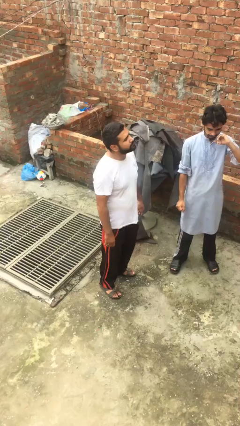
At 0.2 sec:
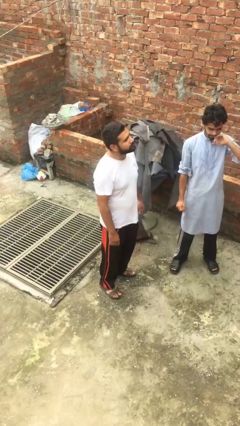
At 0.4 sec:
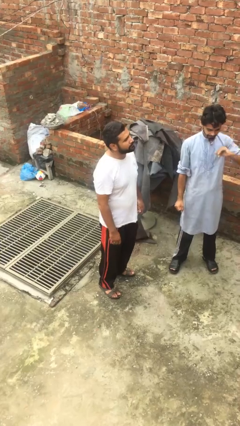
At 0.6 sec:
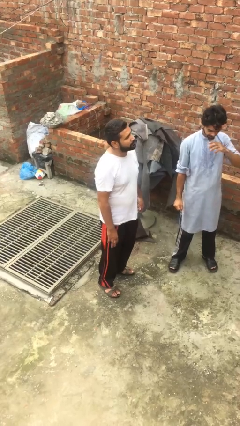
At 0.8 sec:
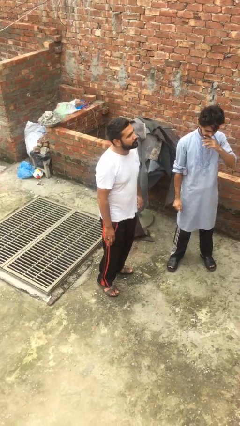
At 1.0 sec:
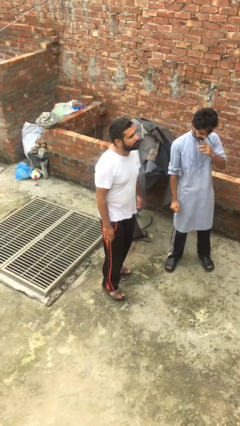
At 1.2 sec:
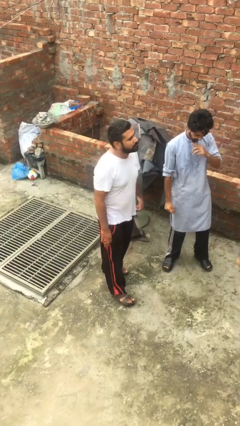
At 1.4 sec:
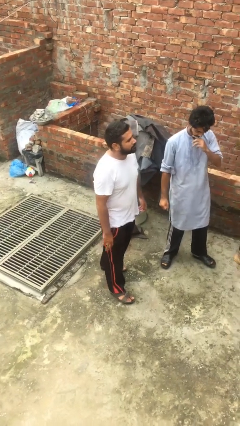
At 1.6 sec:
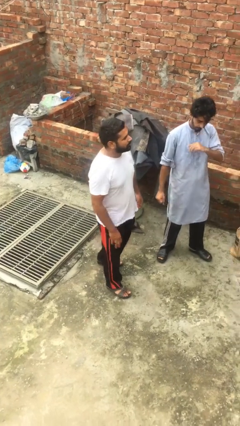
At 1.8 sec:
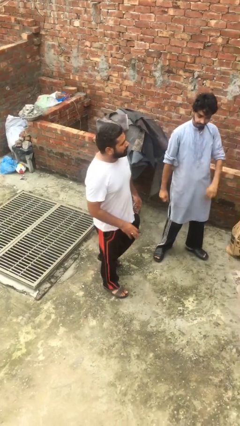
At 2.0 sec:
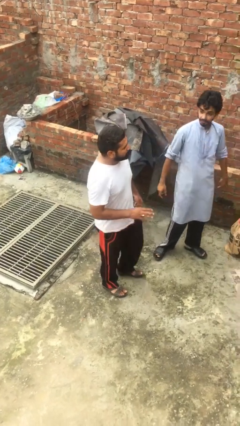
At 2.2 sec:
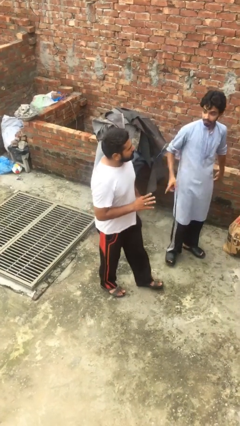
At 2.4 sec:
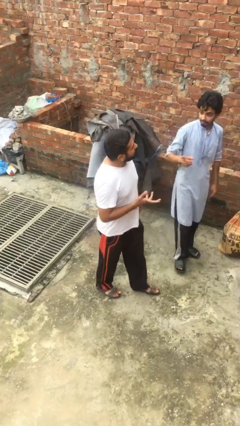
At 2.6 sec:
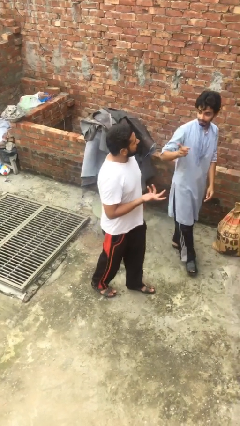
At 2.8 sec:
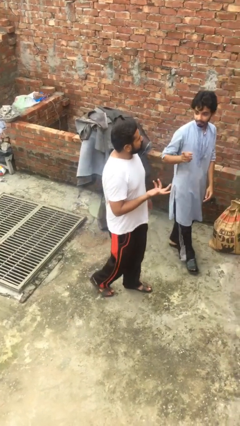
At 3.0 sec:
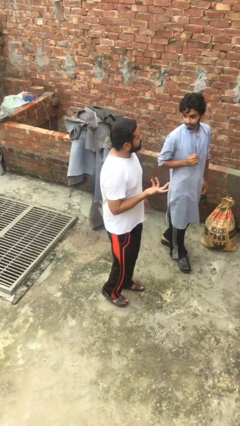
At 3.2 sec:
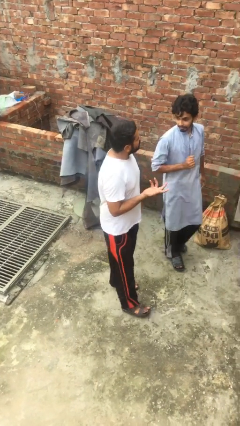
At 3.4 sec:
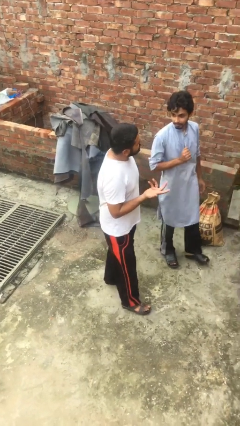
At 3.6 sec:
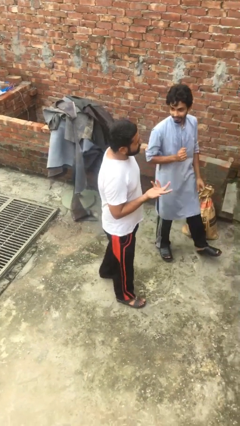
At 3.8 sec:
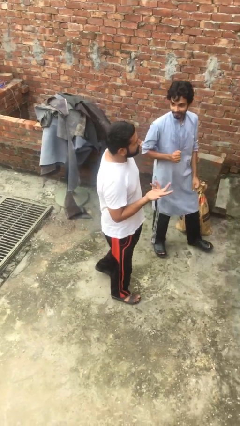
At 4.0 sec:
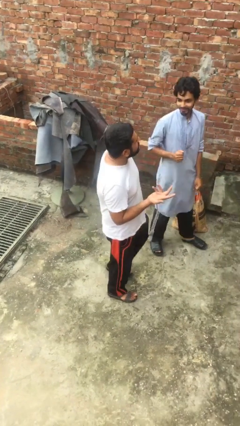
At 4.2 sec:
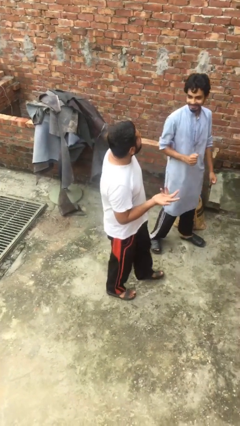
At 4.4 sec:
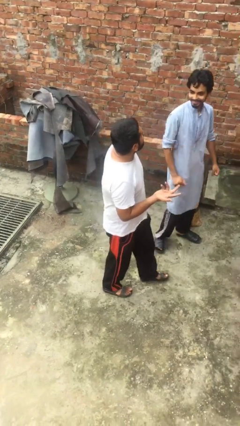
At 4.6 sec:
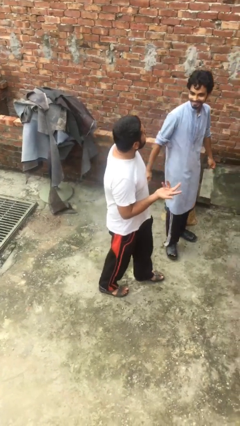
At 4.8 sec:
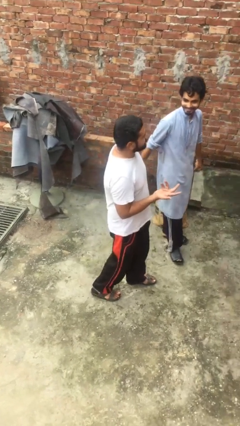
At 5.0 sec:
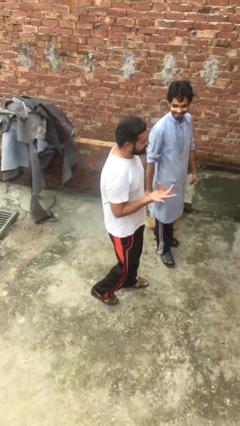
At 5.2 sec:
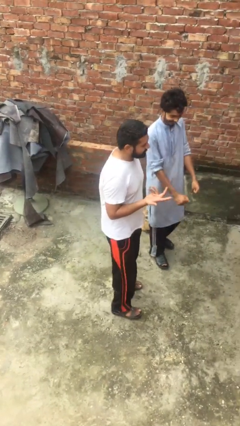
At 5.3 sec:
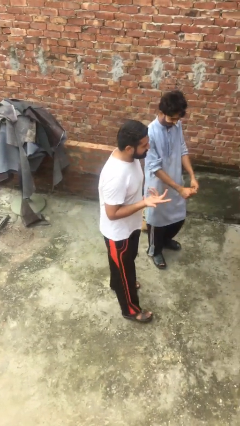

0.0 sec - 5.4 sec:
person talks to person

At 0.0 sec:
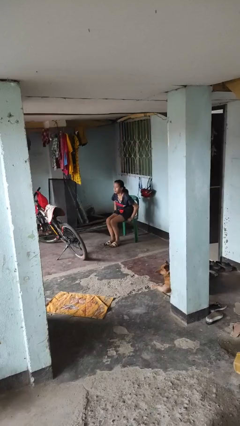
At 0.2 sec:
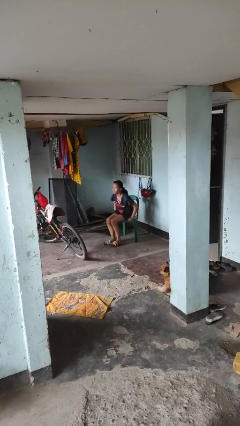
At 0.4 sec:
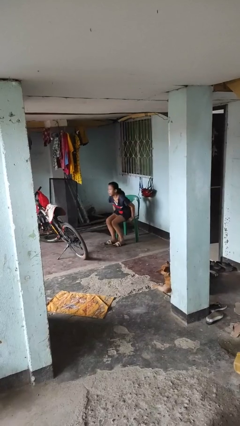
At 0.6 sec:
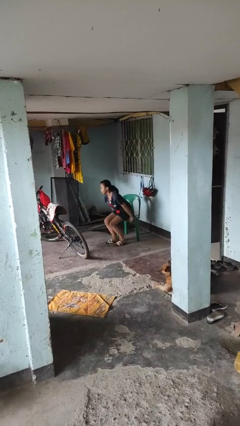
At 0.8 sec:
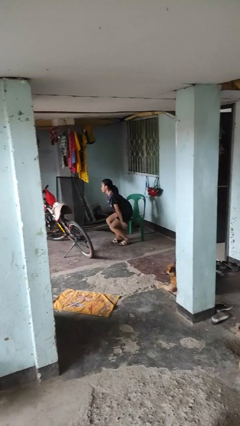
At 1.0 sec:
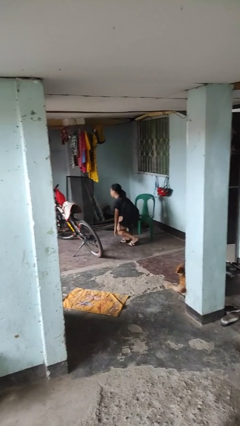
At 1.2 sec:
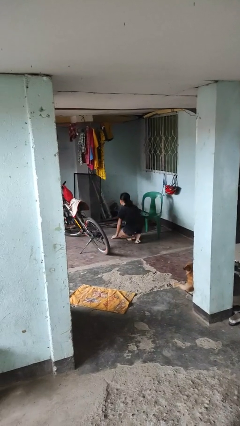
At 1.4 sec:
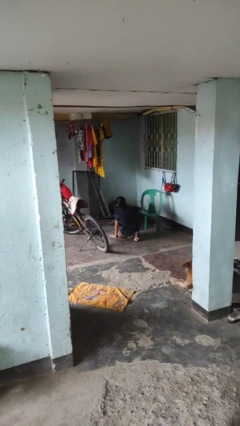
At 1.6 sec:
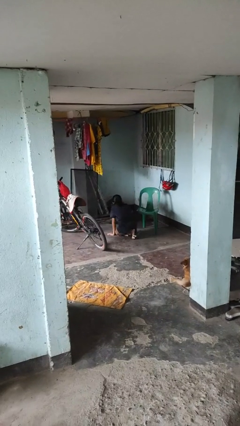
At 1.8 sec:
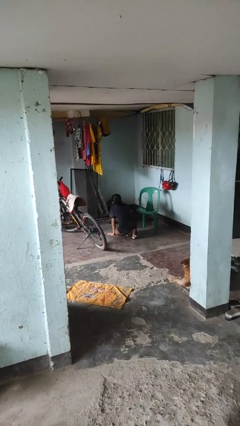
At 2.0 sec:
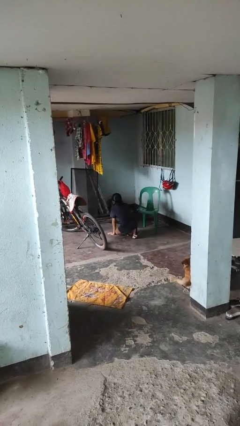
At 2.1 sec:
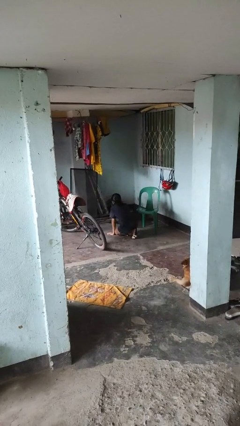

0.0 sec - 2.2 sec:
person falls from chair

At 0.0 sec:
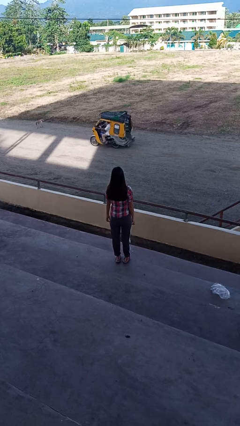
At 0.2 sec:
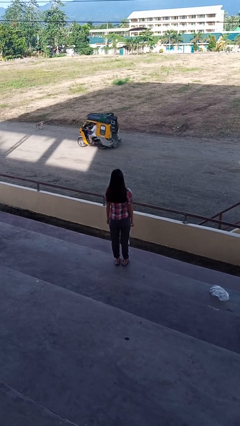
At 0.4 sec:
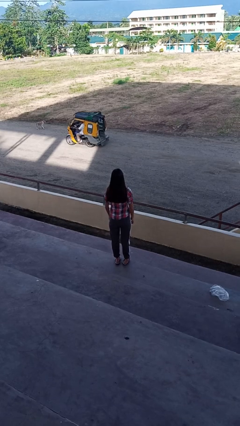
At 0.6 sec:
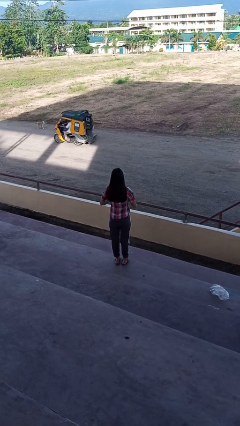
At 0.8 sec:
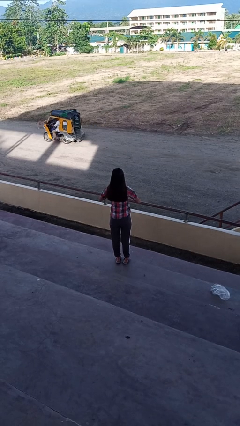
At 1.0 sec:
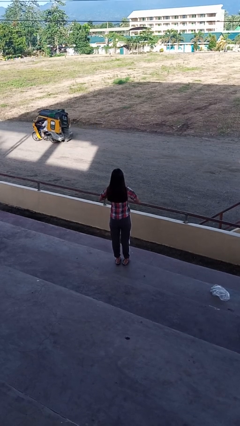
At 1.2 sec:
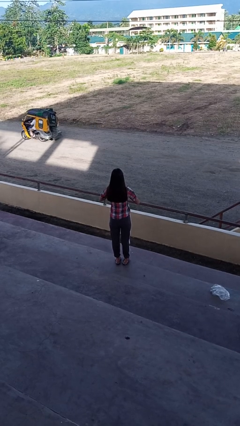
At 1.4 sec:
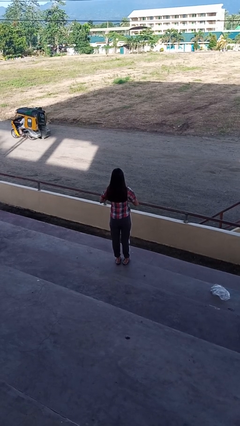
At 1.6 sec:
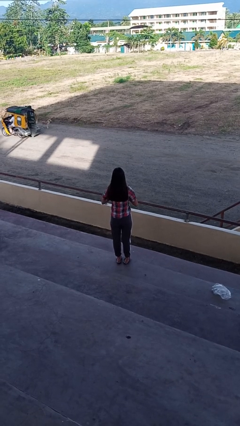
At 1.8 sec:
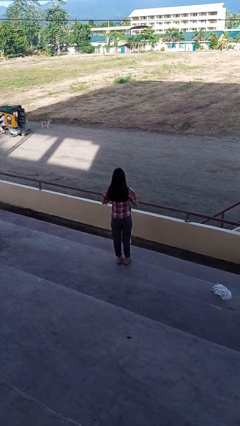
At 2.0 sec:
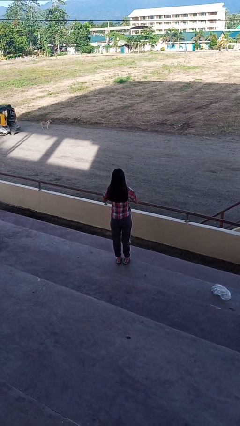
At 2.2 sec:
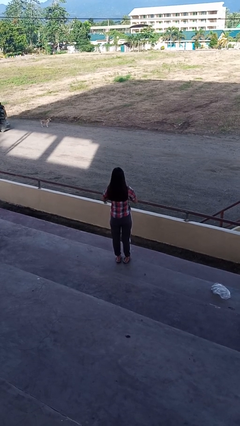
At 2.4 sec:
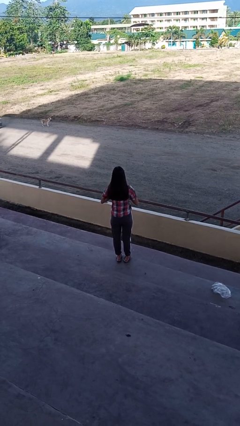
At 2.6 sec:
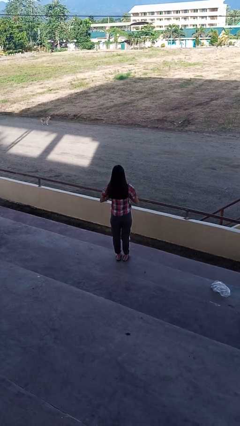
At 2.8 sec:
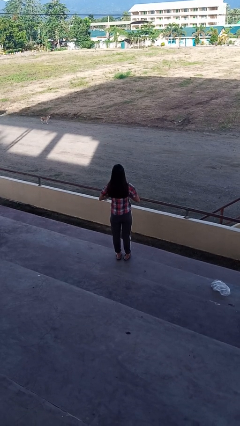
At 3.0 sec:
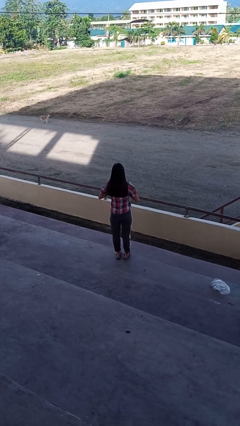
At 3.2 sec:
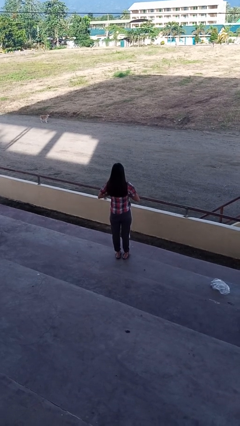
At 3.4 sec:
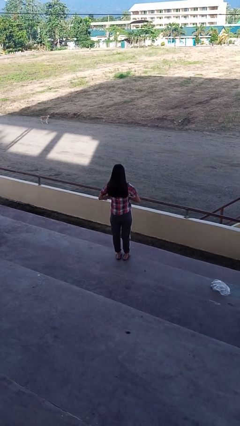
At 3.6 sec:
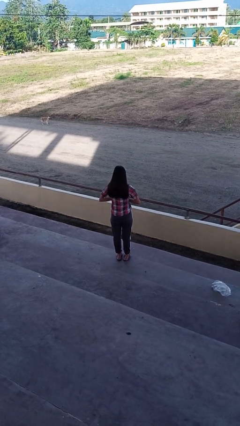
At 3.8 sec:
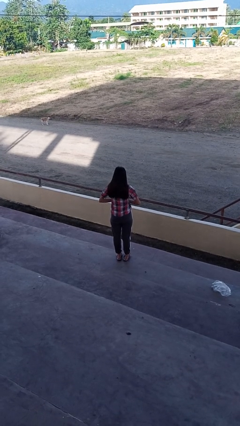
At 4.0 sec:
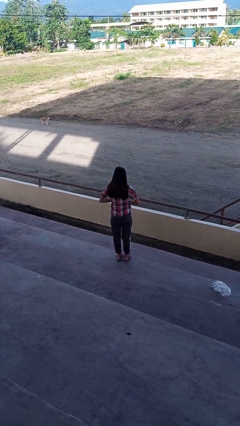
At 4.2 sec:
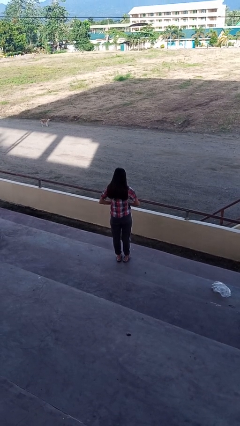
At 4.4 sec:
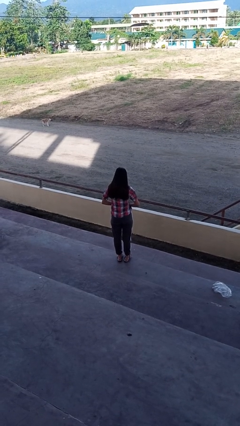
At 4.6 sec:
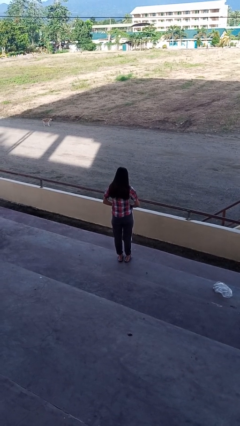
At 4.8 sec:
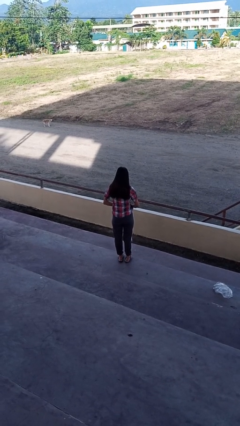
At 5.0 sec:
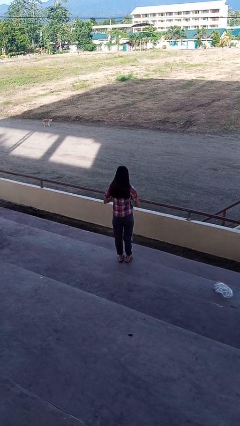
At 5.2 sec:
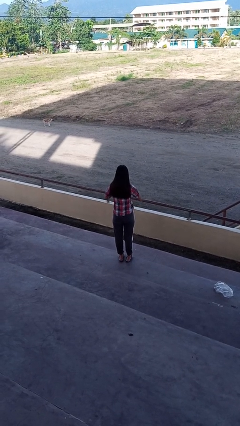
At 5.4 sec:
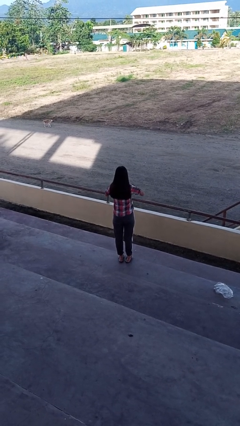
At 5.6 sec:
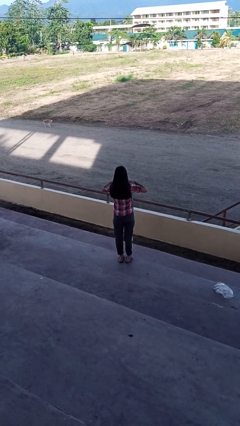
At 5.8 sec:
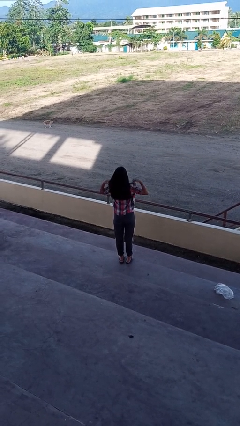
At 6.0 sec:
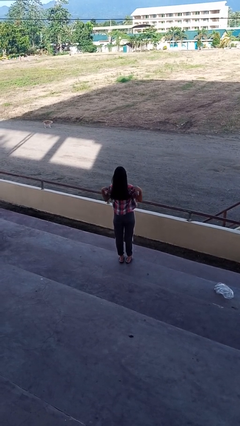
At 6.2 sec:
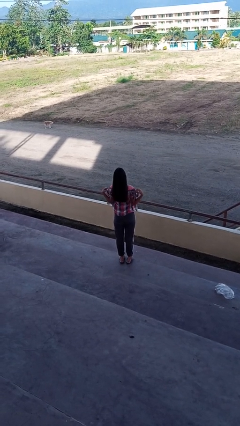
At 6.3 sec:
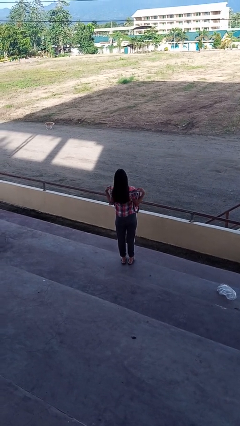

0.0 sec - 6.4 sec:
person unbuttons shirt

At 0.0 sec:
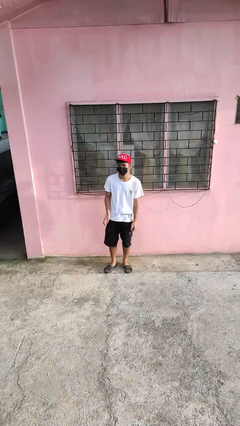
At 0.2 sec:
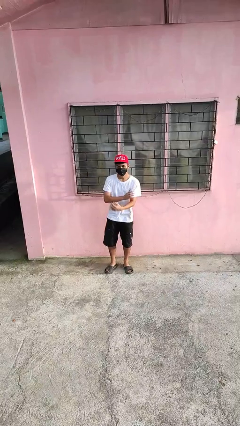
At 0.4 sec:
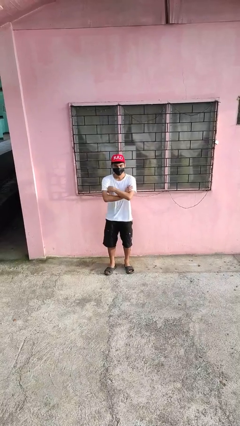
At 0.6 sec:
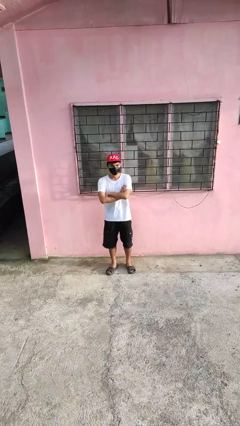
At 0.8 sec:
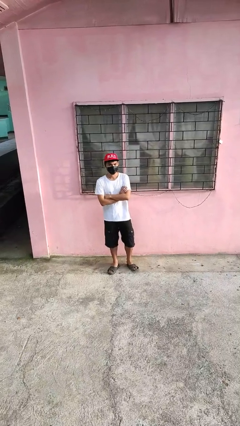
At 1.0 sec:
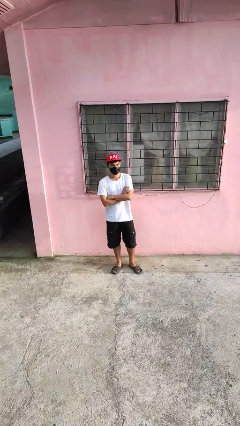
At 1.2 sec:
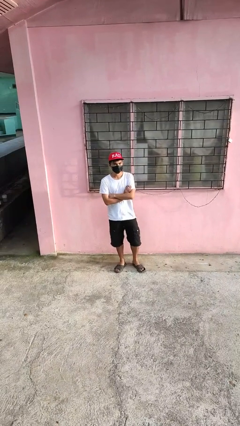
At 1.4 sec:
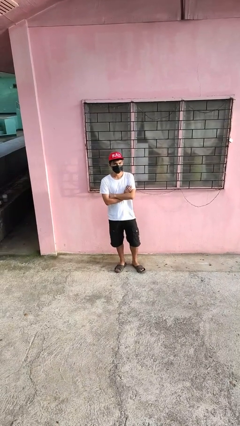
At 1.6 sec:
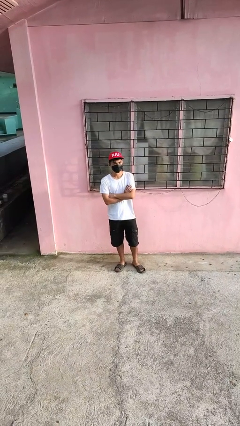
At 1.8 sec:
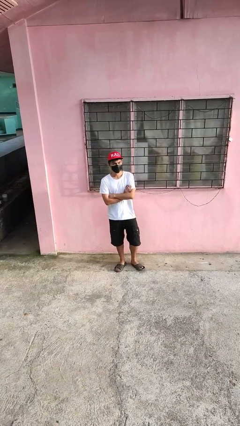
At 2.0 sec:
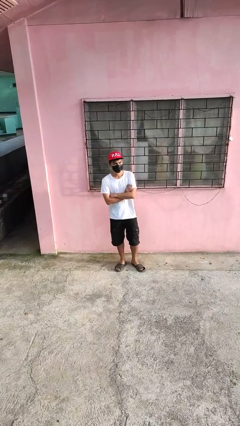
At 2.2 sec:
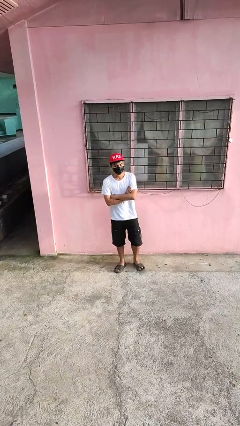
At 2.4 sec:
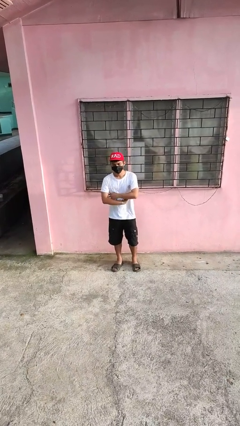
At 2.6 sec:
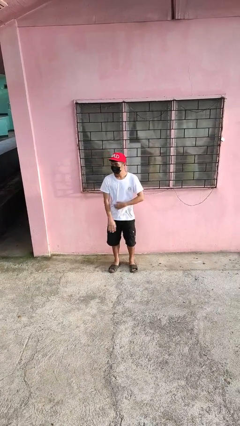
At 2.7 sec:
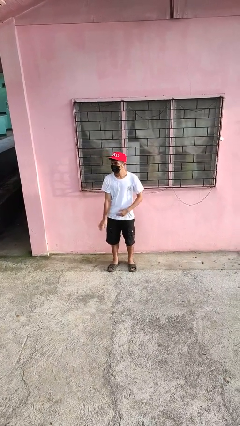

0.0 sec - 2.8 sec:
person crosses arms

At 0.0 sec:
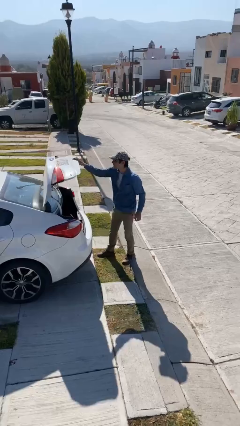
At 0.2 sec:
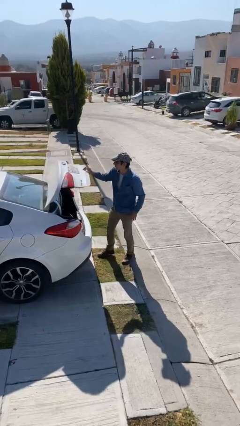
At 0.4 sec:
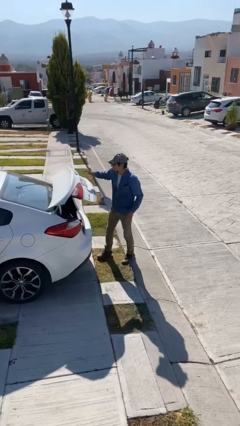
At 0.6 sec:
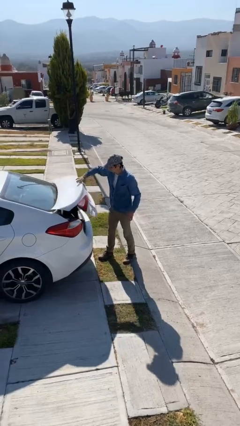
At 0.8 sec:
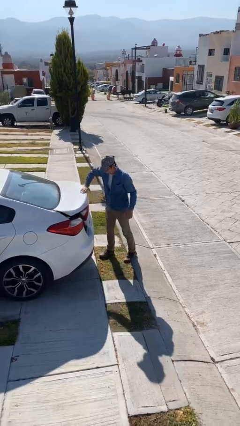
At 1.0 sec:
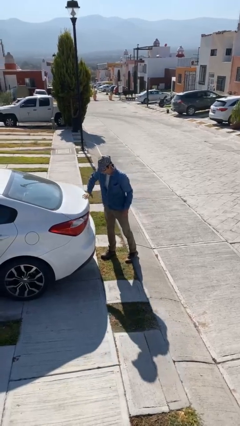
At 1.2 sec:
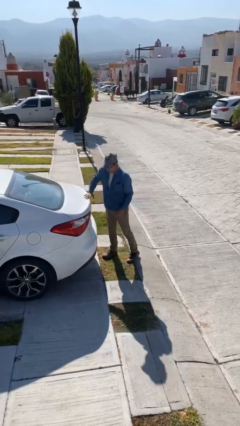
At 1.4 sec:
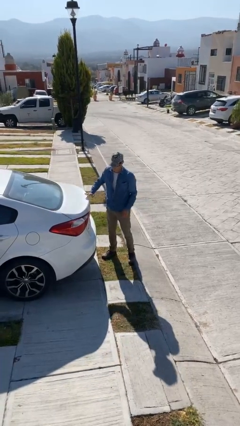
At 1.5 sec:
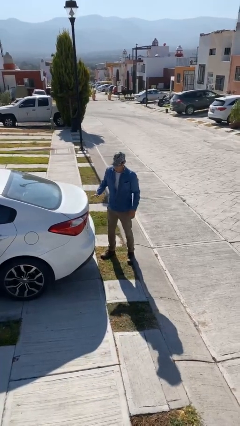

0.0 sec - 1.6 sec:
person closes car trunk
